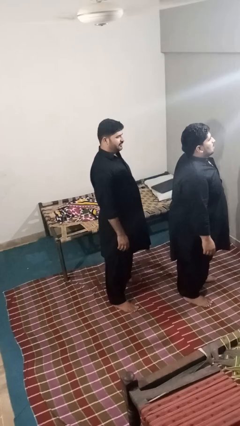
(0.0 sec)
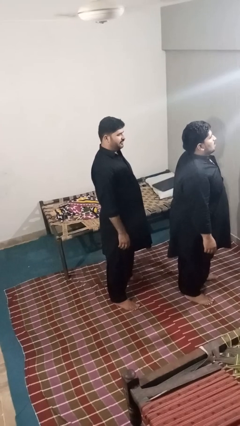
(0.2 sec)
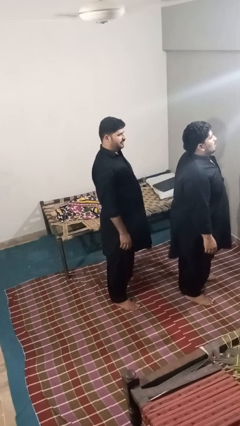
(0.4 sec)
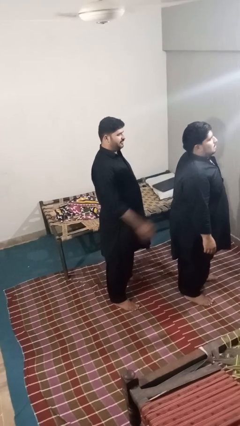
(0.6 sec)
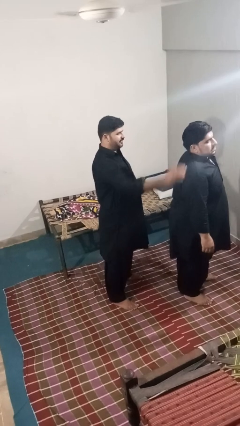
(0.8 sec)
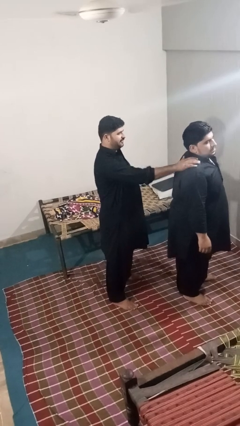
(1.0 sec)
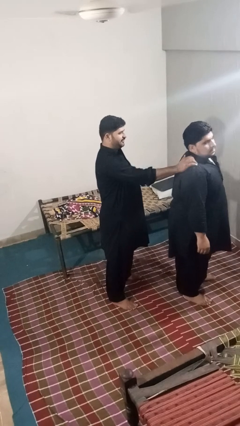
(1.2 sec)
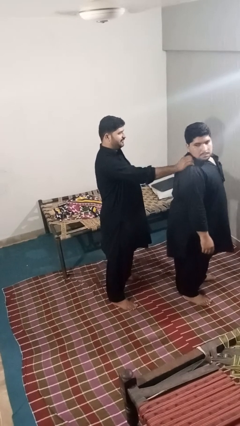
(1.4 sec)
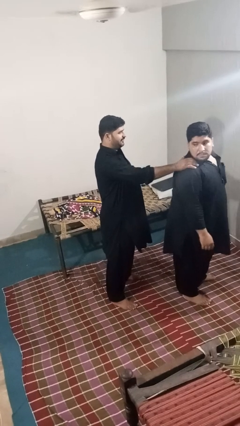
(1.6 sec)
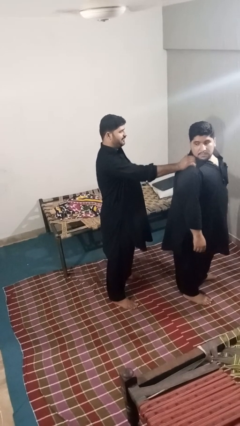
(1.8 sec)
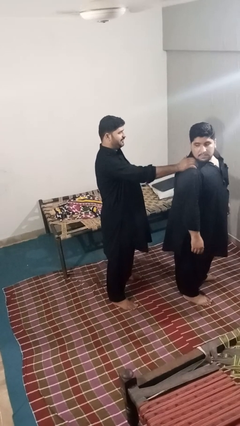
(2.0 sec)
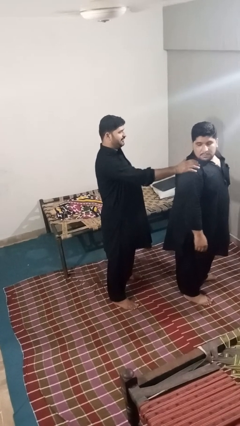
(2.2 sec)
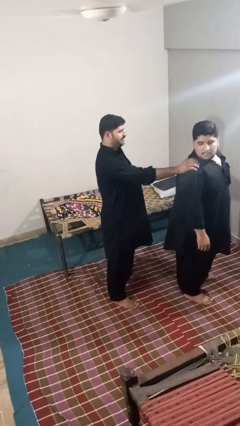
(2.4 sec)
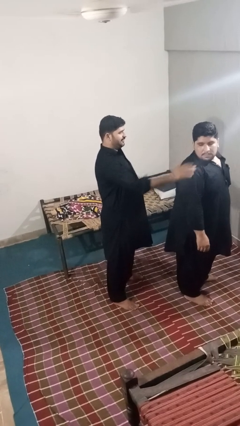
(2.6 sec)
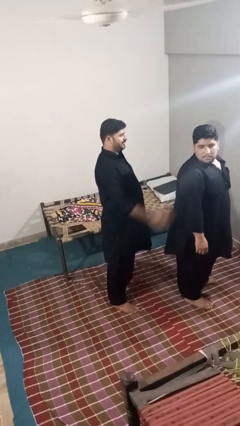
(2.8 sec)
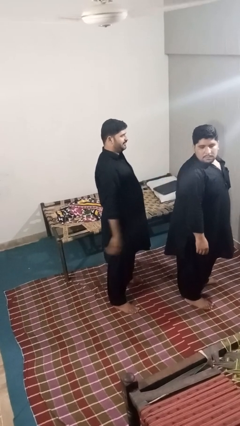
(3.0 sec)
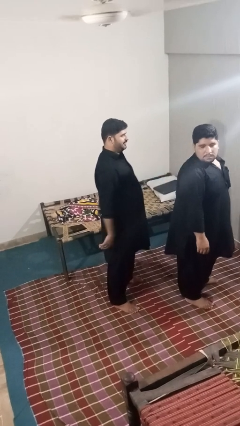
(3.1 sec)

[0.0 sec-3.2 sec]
person touches back of person

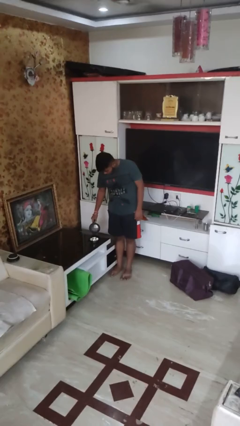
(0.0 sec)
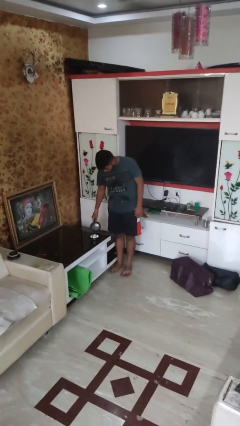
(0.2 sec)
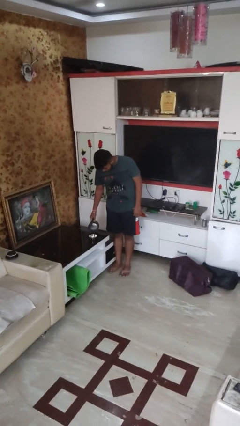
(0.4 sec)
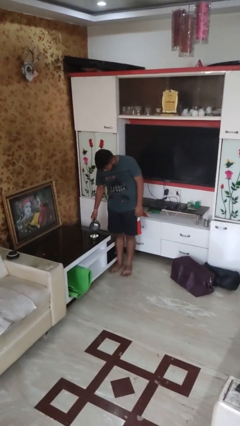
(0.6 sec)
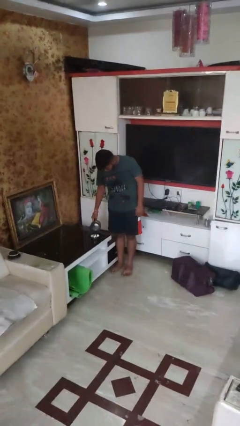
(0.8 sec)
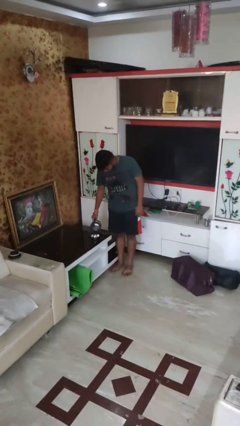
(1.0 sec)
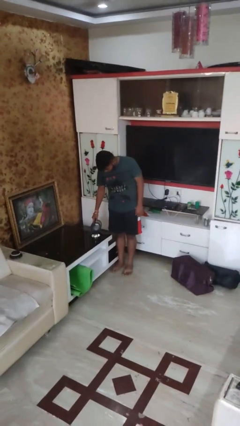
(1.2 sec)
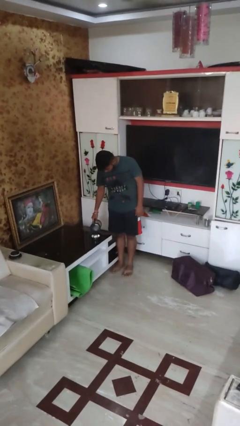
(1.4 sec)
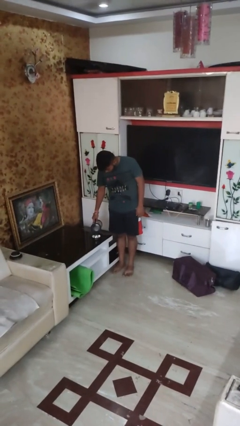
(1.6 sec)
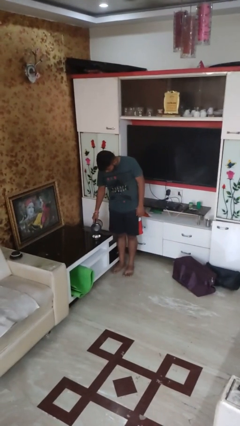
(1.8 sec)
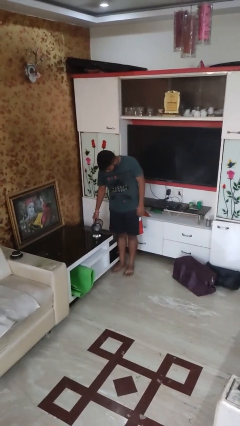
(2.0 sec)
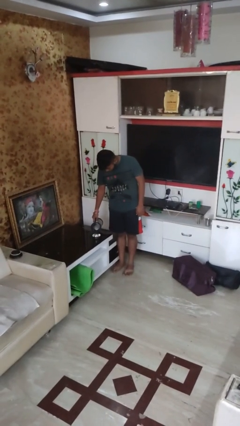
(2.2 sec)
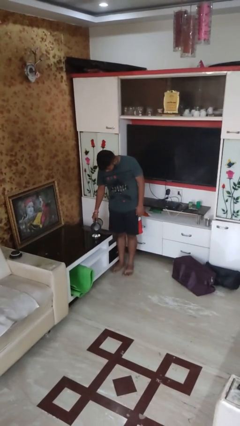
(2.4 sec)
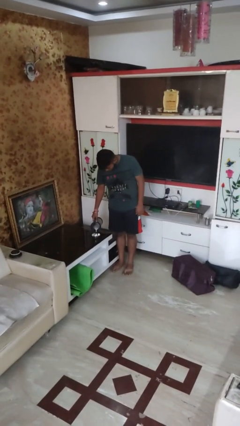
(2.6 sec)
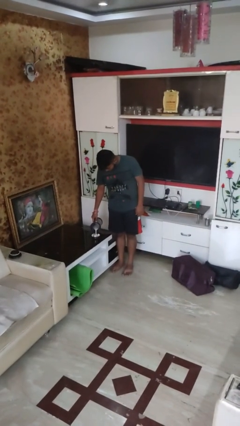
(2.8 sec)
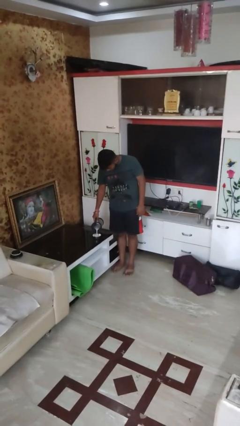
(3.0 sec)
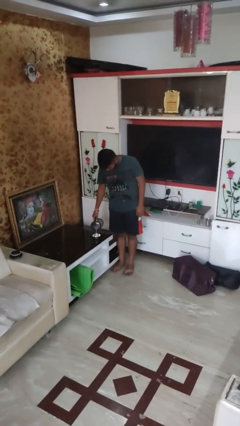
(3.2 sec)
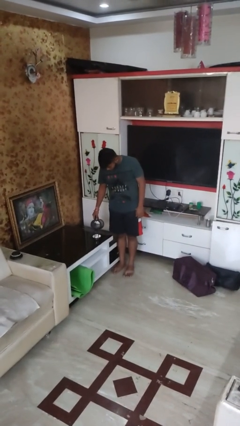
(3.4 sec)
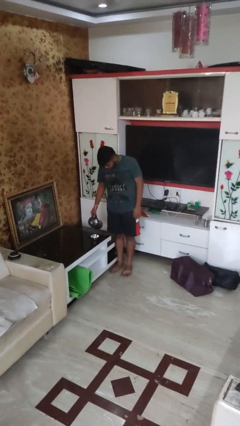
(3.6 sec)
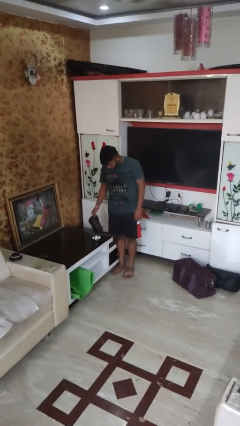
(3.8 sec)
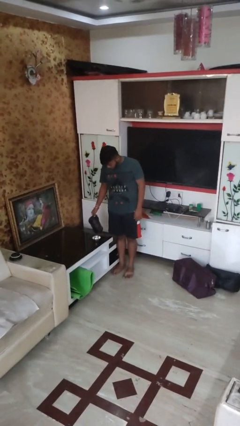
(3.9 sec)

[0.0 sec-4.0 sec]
person pours into bowl

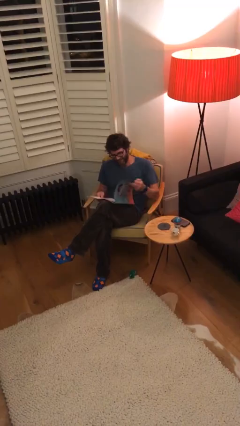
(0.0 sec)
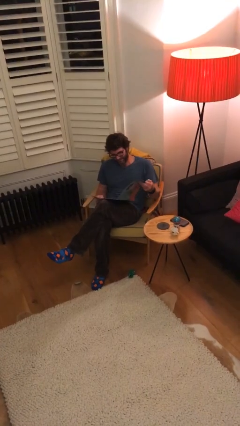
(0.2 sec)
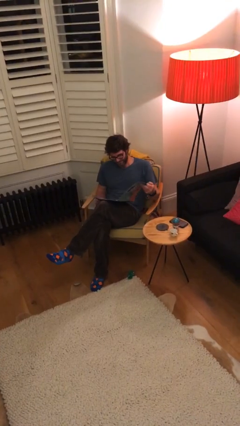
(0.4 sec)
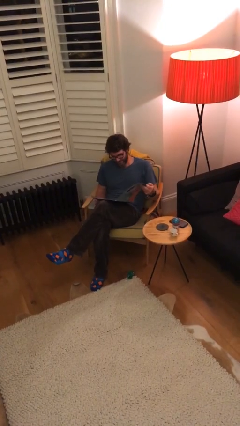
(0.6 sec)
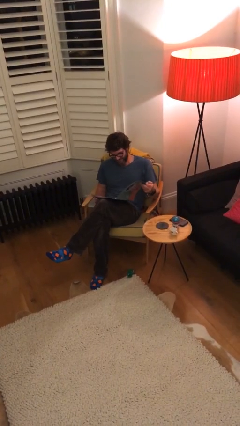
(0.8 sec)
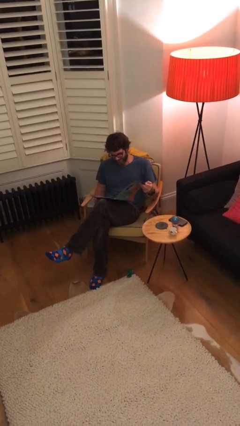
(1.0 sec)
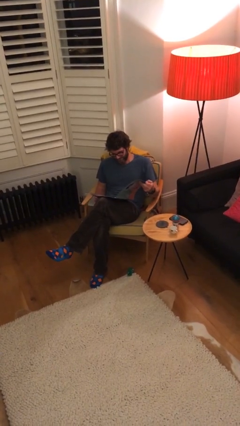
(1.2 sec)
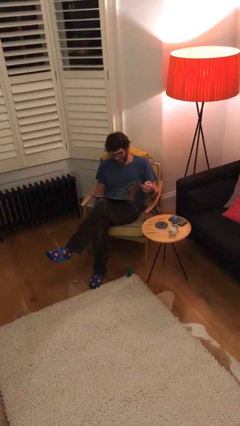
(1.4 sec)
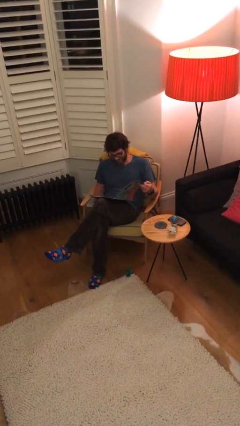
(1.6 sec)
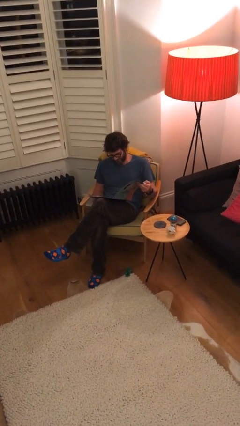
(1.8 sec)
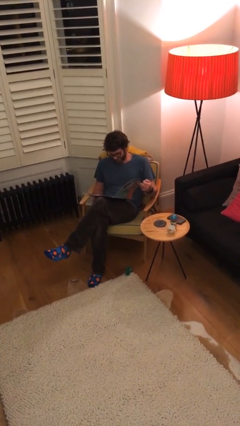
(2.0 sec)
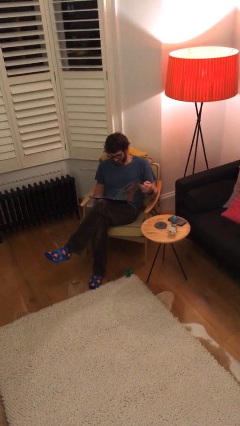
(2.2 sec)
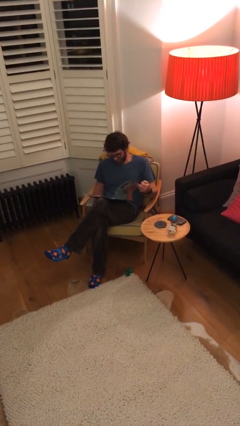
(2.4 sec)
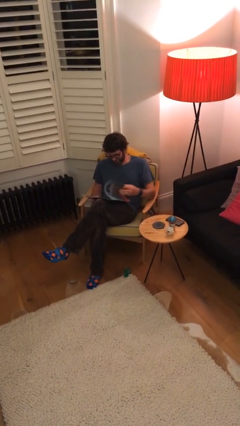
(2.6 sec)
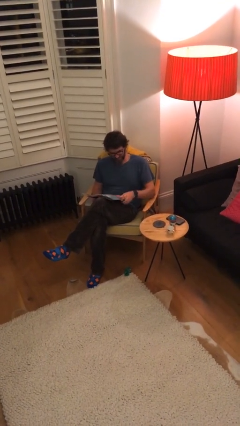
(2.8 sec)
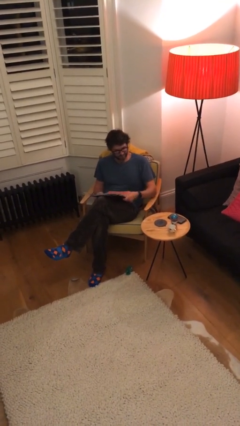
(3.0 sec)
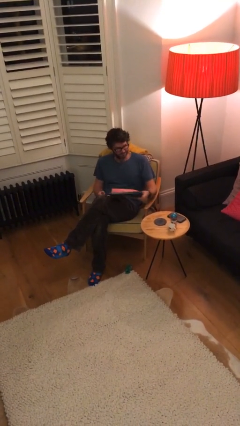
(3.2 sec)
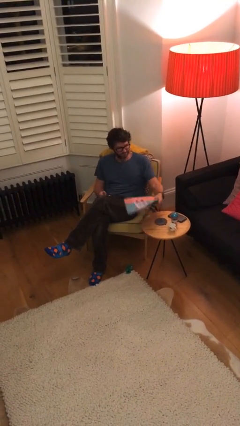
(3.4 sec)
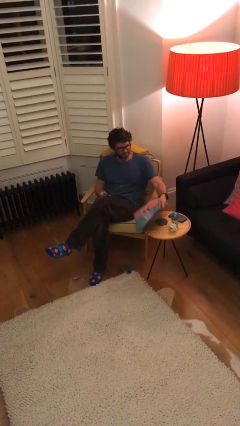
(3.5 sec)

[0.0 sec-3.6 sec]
person reads document

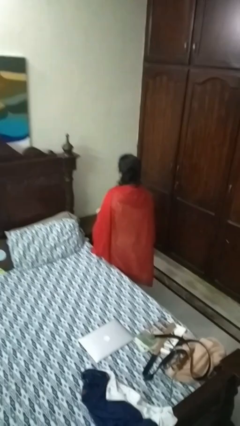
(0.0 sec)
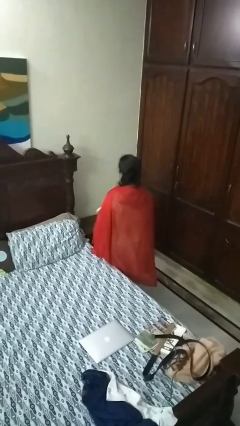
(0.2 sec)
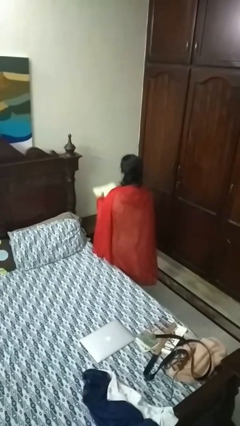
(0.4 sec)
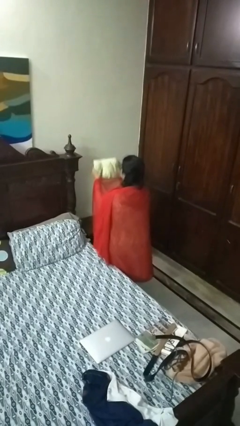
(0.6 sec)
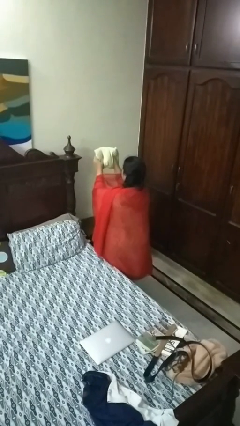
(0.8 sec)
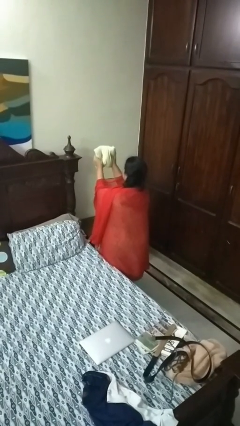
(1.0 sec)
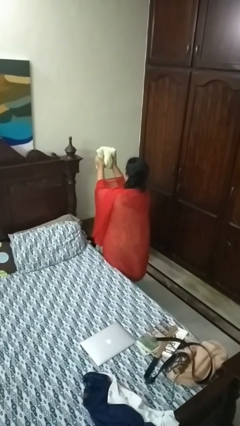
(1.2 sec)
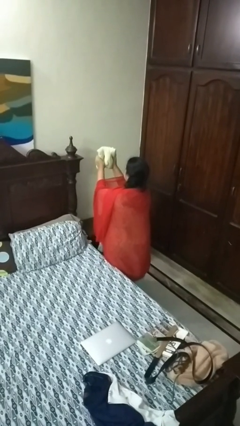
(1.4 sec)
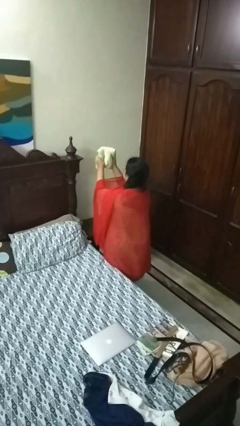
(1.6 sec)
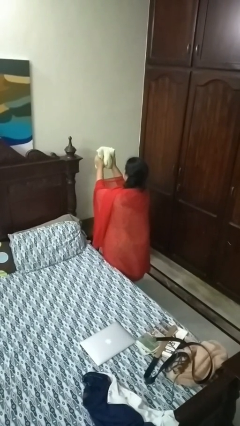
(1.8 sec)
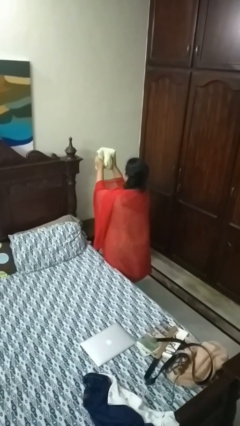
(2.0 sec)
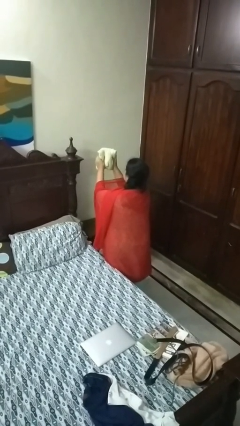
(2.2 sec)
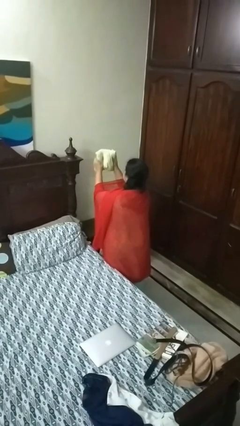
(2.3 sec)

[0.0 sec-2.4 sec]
person squeezes object

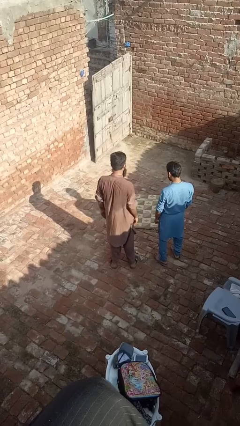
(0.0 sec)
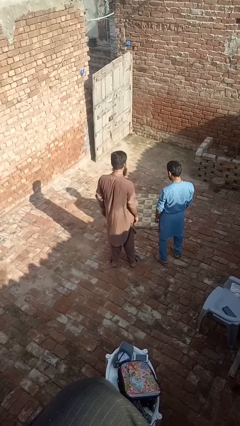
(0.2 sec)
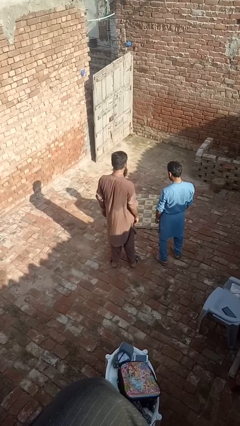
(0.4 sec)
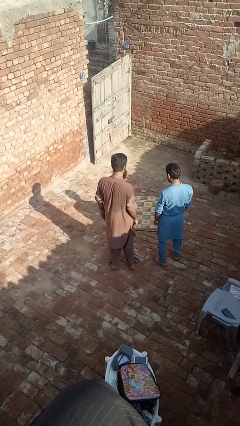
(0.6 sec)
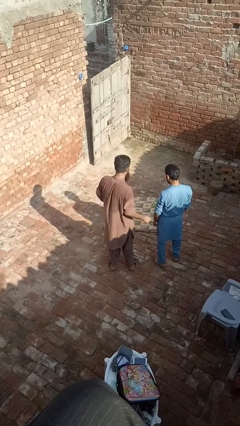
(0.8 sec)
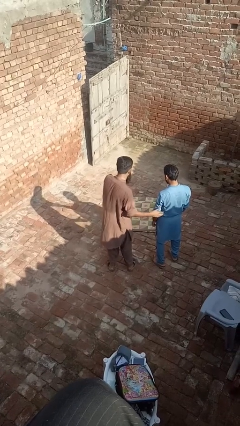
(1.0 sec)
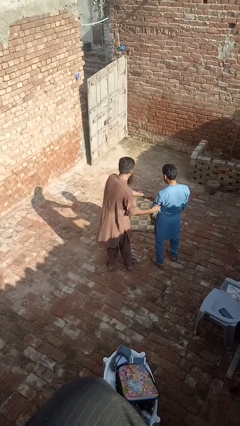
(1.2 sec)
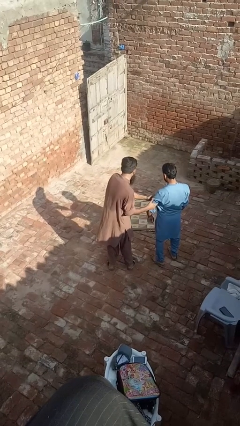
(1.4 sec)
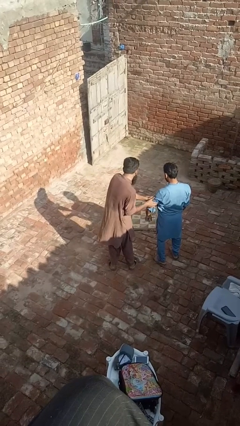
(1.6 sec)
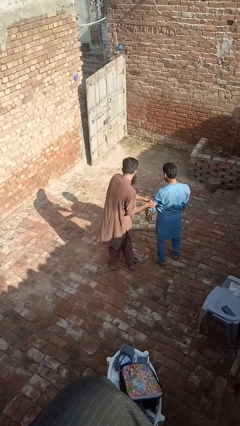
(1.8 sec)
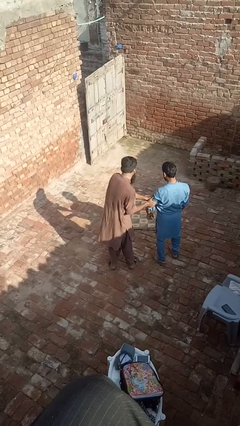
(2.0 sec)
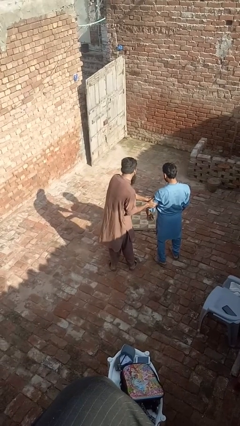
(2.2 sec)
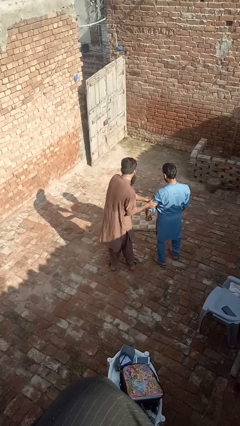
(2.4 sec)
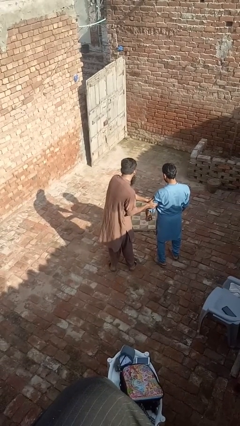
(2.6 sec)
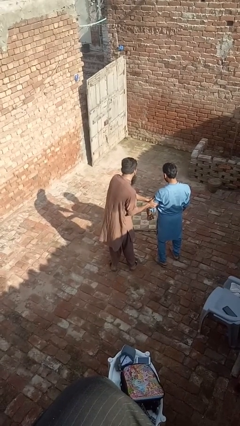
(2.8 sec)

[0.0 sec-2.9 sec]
person grabs person by bicep

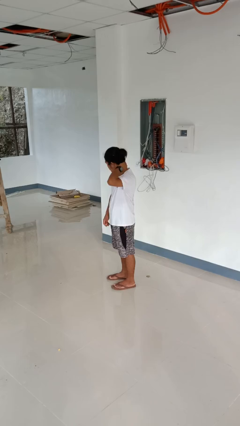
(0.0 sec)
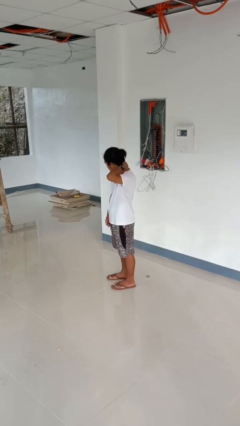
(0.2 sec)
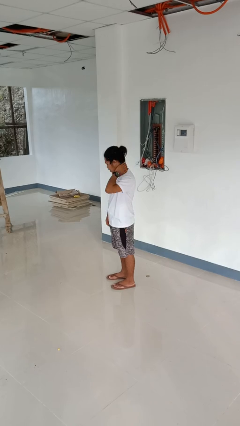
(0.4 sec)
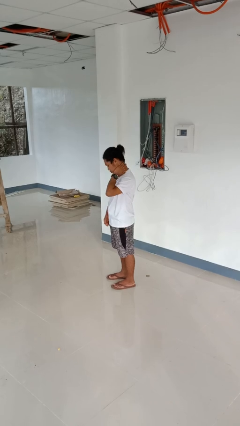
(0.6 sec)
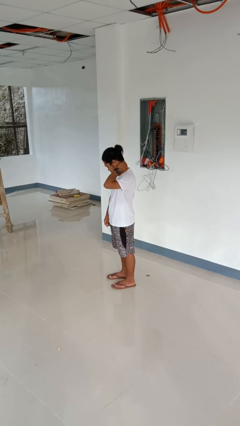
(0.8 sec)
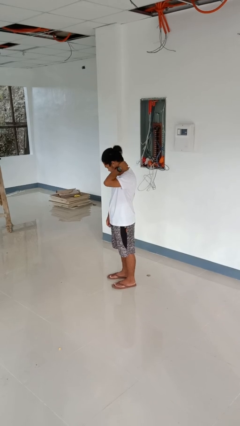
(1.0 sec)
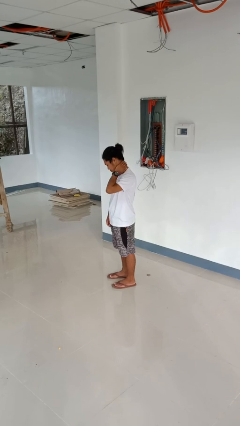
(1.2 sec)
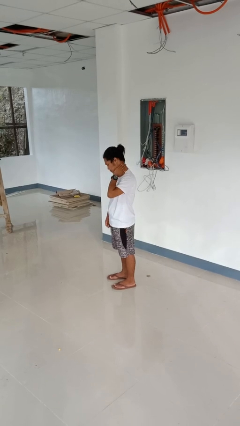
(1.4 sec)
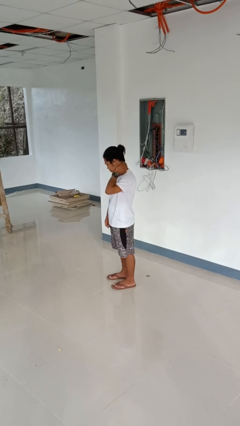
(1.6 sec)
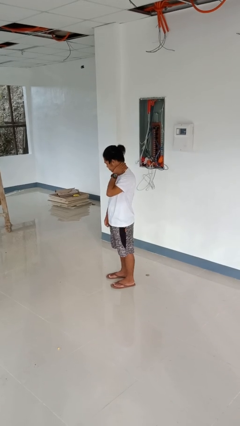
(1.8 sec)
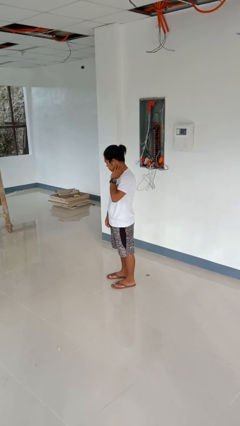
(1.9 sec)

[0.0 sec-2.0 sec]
person rubs neck
